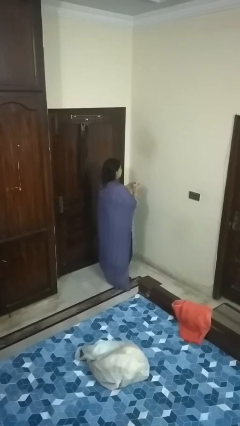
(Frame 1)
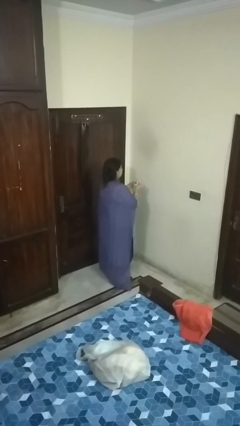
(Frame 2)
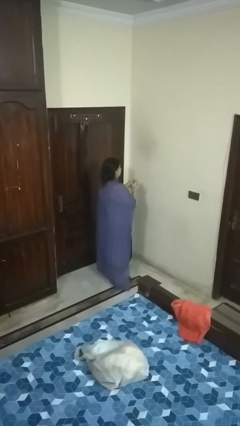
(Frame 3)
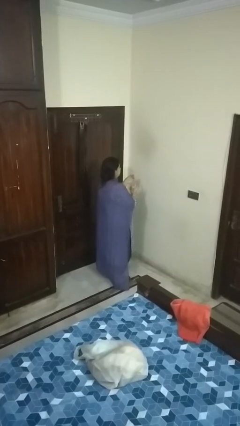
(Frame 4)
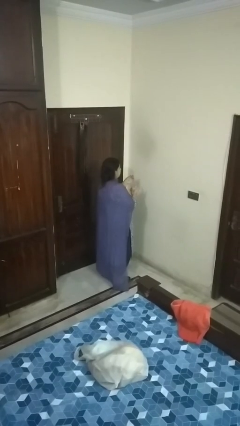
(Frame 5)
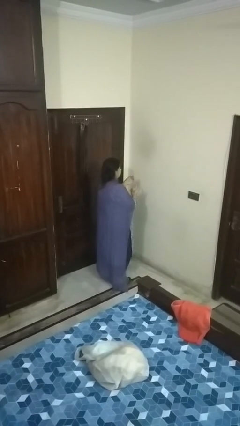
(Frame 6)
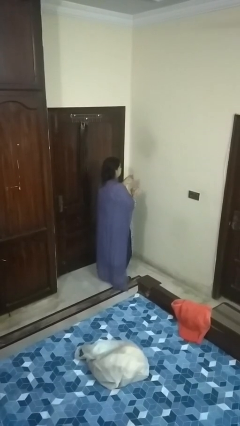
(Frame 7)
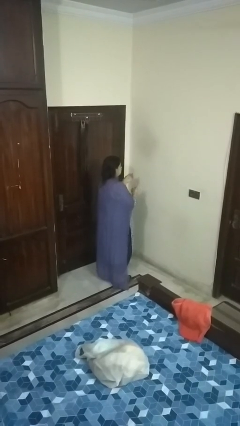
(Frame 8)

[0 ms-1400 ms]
person takes off ring

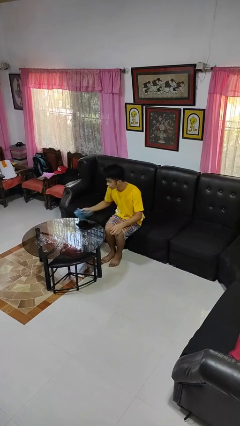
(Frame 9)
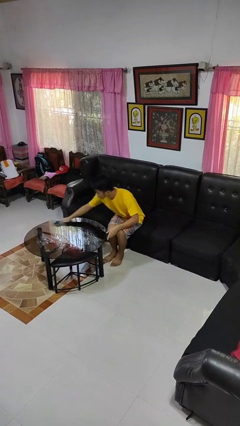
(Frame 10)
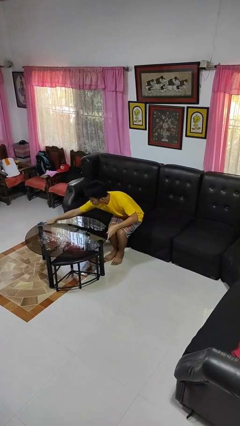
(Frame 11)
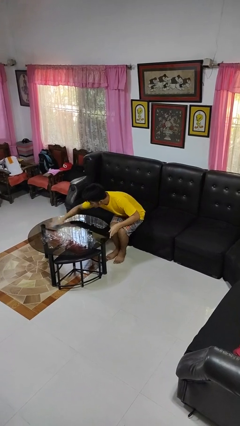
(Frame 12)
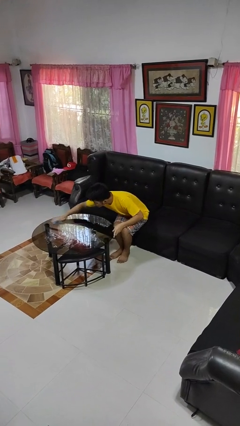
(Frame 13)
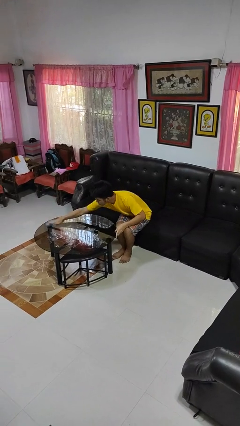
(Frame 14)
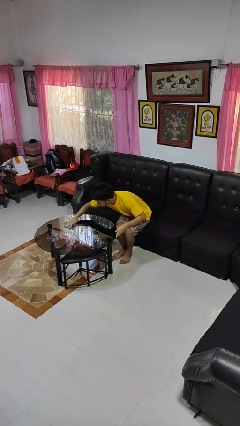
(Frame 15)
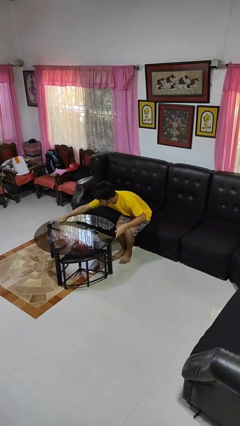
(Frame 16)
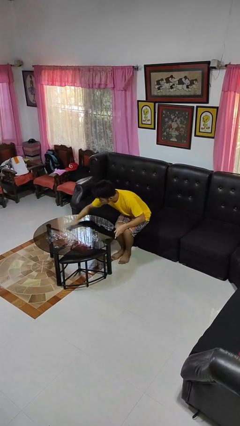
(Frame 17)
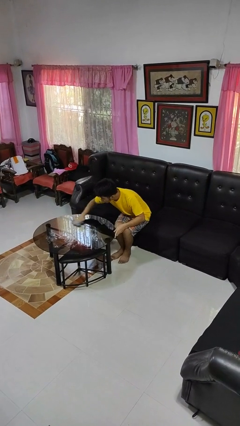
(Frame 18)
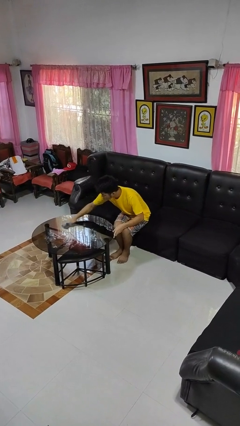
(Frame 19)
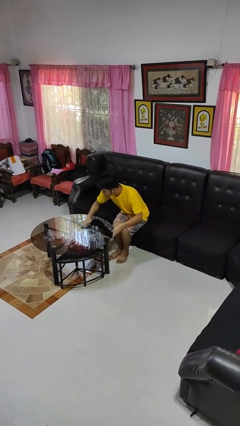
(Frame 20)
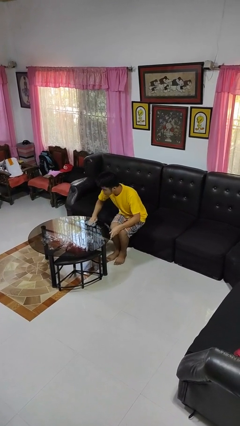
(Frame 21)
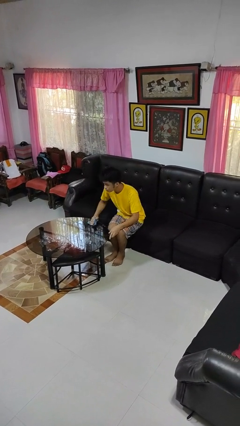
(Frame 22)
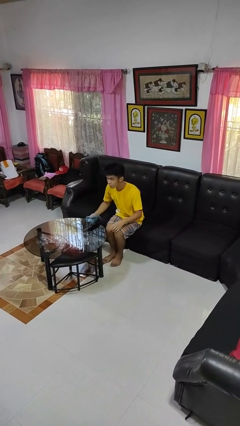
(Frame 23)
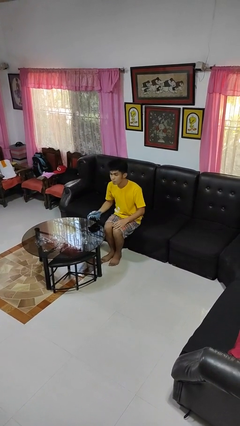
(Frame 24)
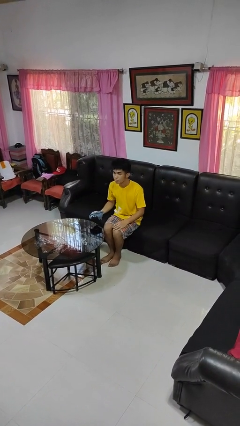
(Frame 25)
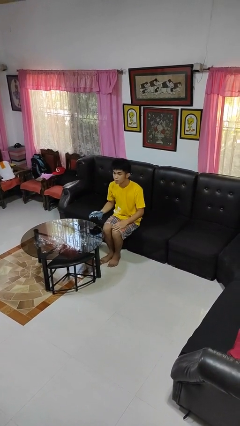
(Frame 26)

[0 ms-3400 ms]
person cleans table with rag

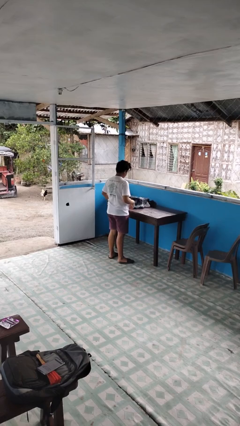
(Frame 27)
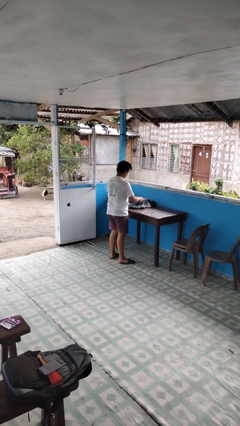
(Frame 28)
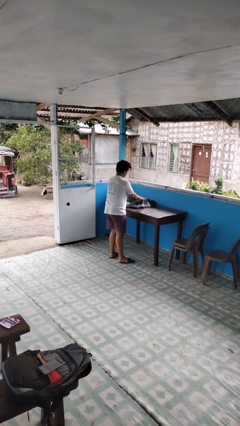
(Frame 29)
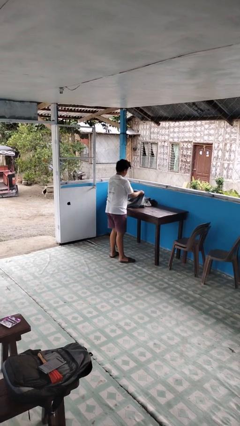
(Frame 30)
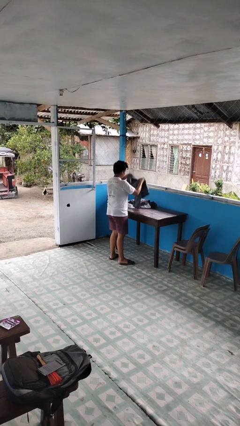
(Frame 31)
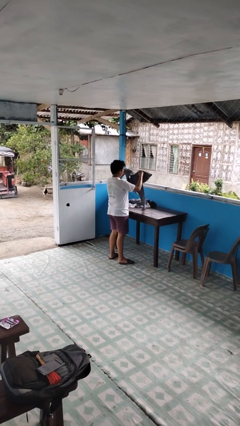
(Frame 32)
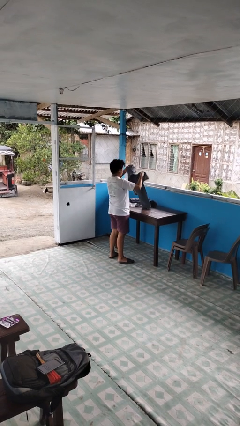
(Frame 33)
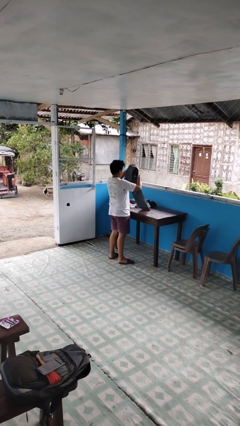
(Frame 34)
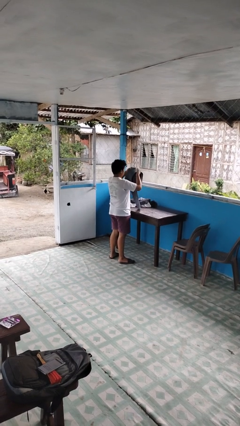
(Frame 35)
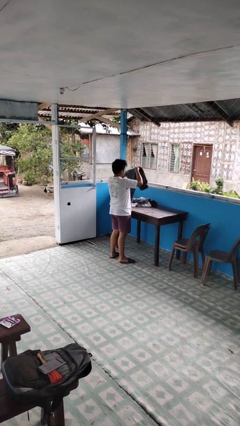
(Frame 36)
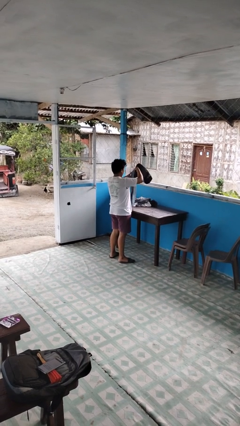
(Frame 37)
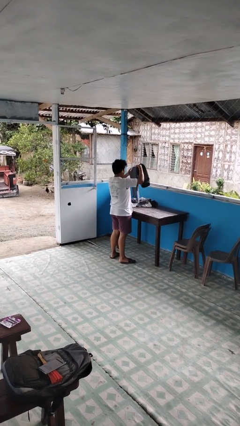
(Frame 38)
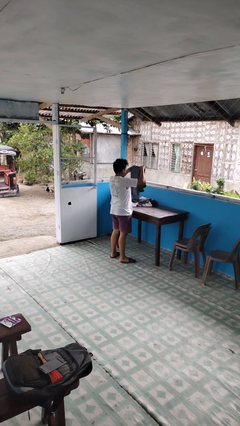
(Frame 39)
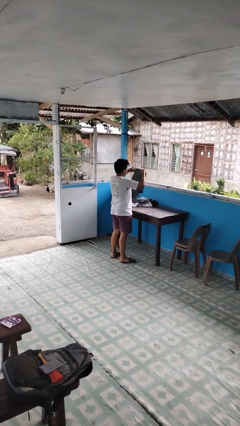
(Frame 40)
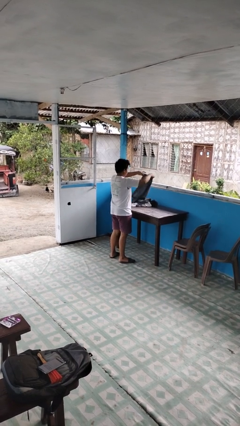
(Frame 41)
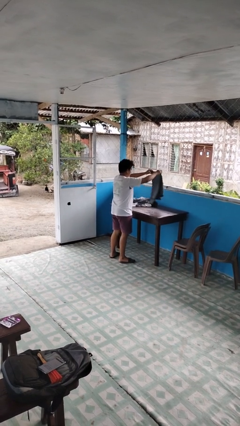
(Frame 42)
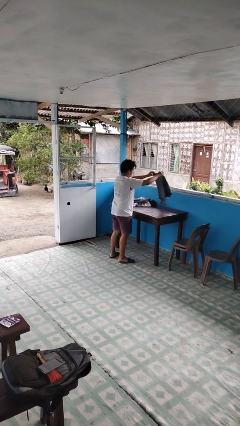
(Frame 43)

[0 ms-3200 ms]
person folds pants

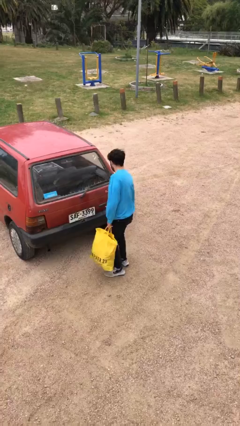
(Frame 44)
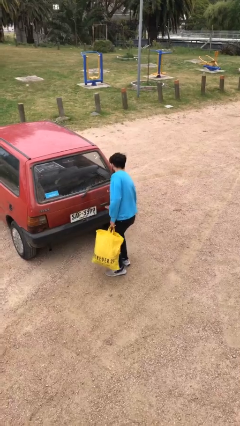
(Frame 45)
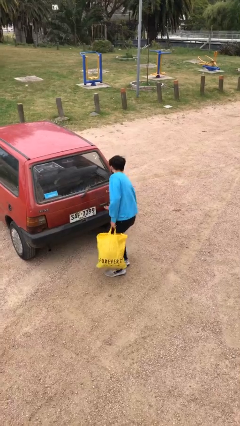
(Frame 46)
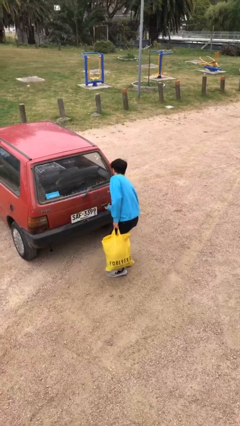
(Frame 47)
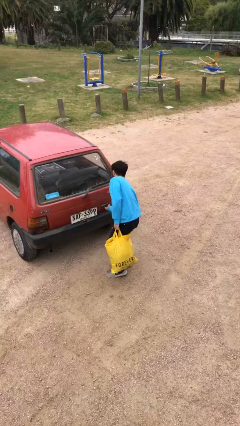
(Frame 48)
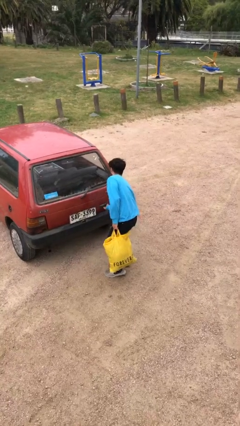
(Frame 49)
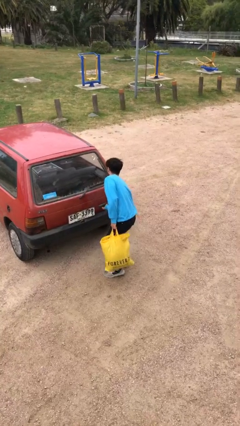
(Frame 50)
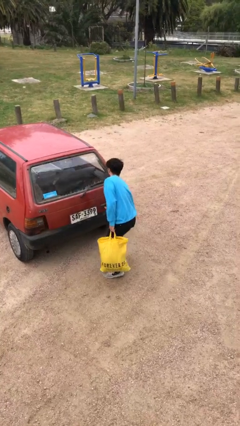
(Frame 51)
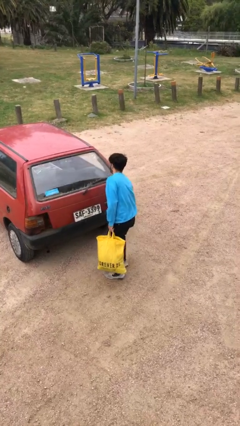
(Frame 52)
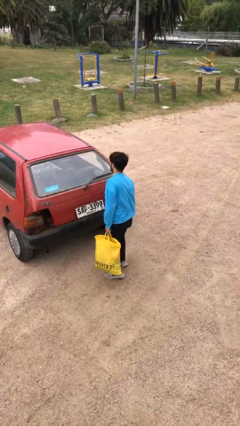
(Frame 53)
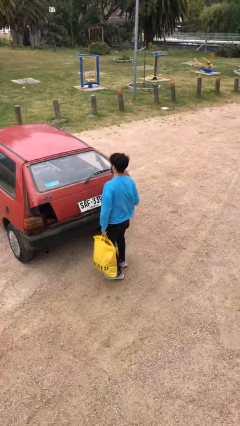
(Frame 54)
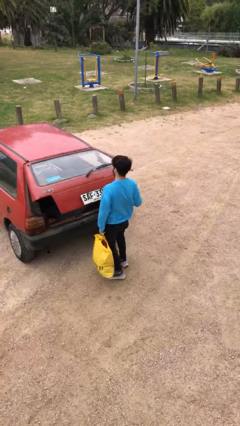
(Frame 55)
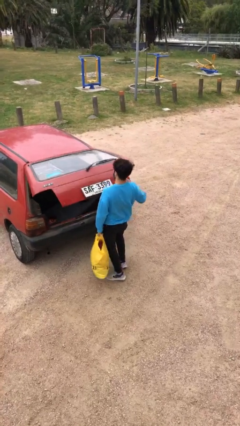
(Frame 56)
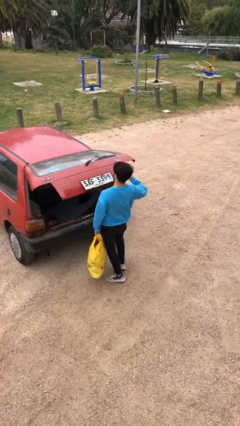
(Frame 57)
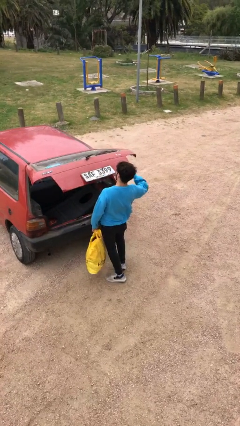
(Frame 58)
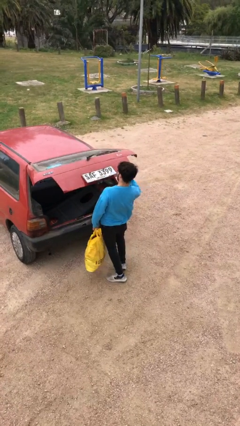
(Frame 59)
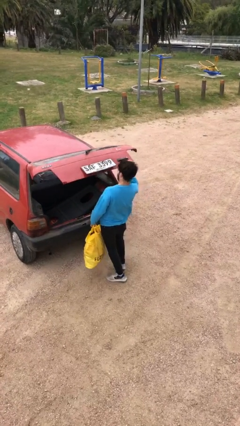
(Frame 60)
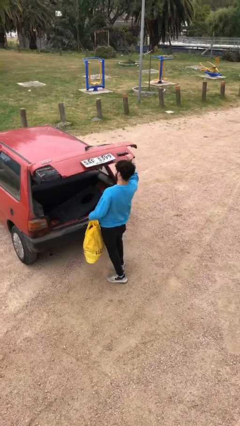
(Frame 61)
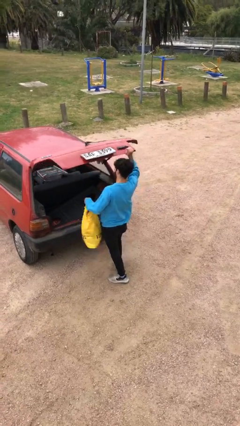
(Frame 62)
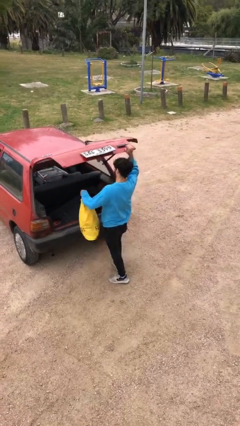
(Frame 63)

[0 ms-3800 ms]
person opens car trunk

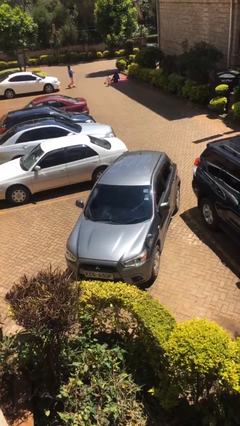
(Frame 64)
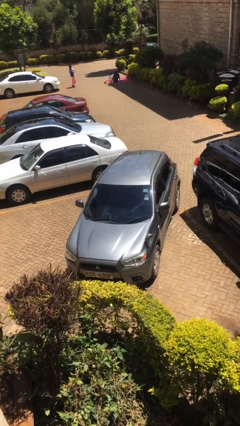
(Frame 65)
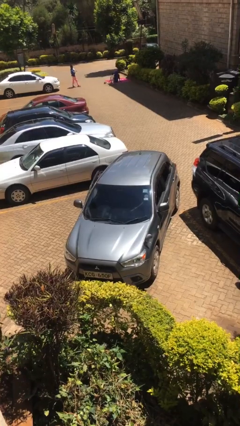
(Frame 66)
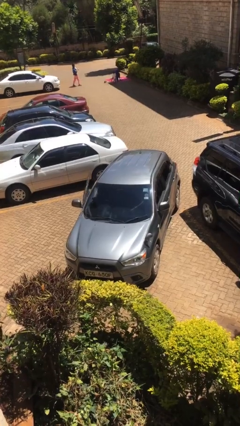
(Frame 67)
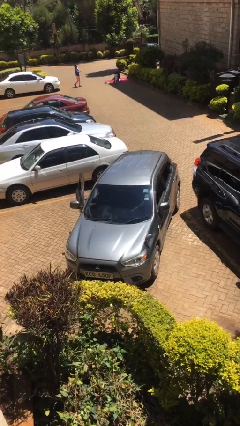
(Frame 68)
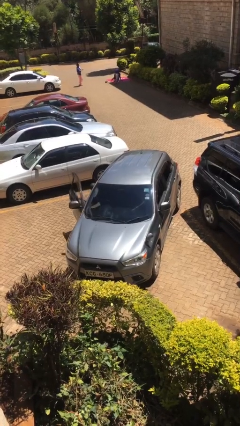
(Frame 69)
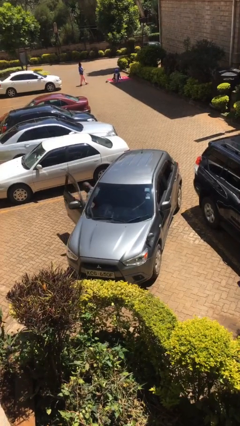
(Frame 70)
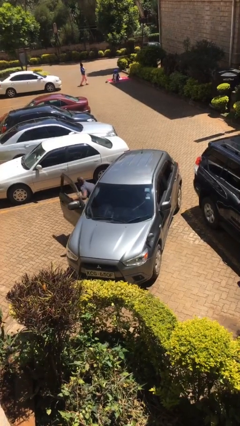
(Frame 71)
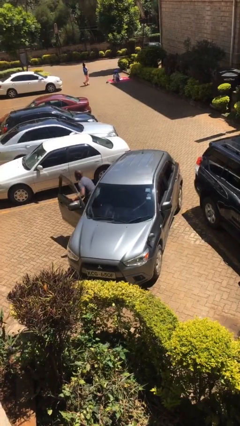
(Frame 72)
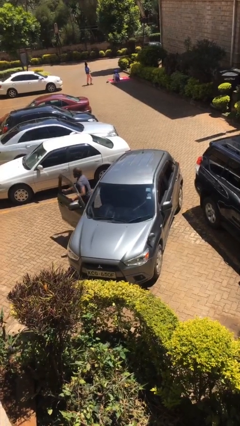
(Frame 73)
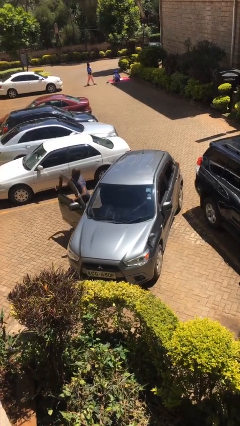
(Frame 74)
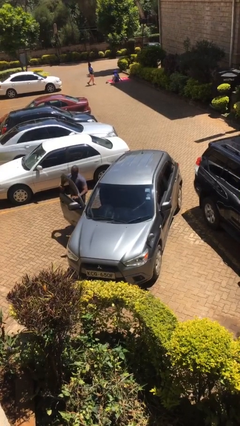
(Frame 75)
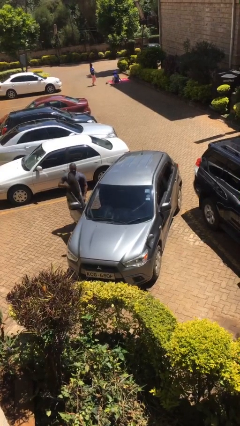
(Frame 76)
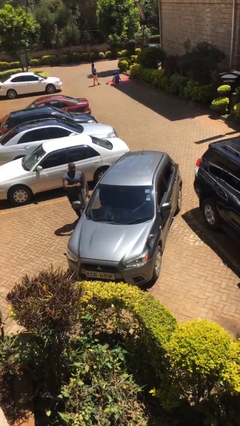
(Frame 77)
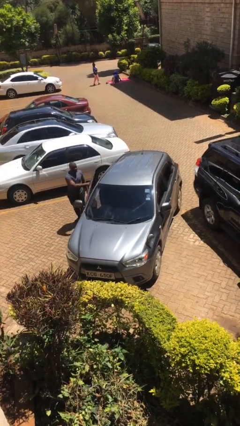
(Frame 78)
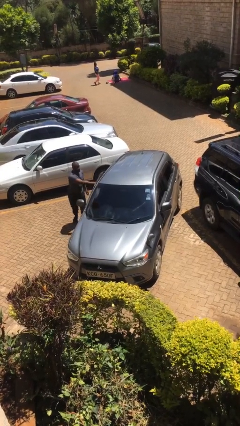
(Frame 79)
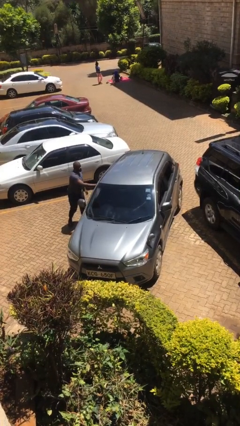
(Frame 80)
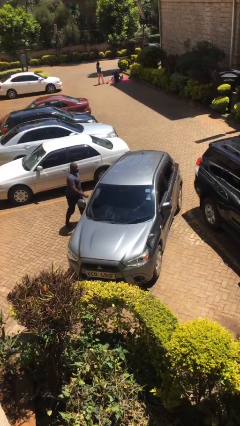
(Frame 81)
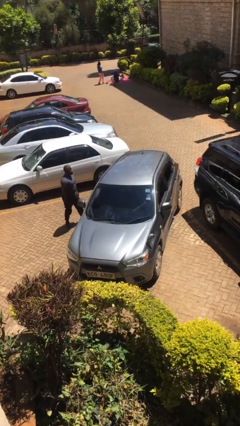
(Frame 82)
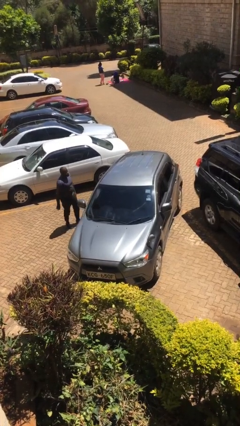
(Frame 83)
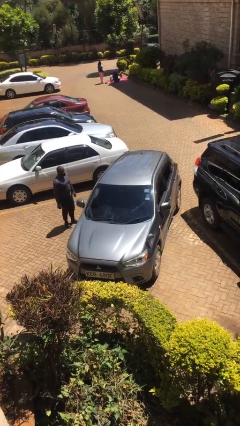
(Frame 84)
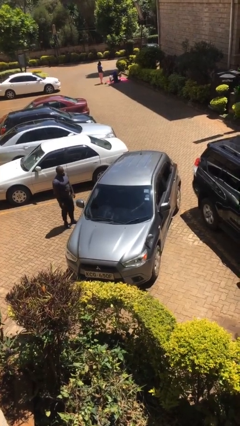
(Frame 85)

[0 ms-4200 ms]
car drops off person

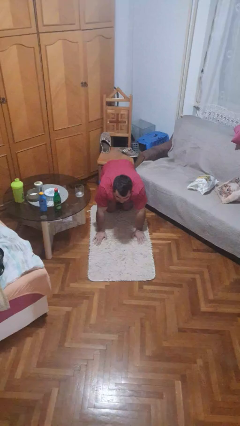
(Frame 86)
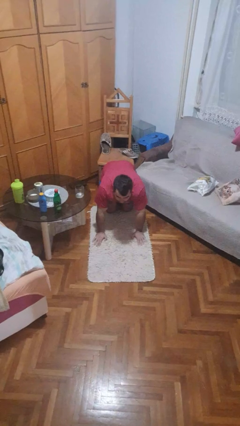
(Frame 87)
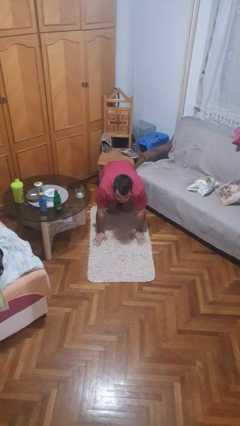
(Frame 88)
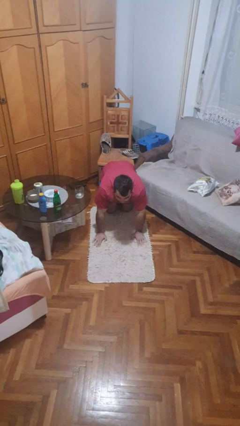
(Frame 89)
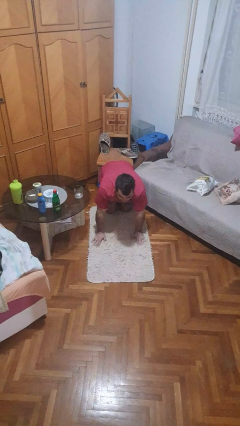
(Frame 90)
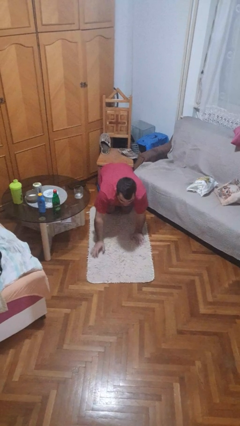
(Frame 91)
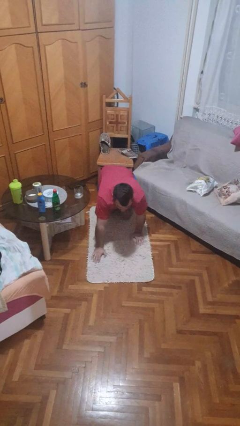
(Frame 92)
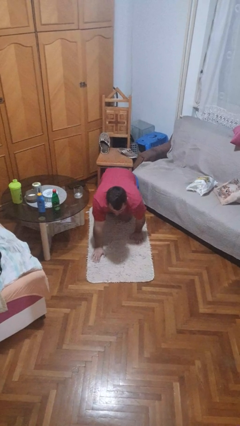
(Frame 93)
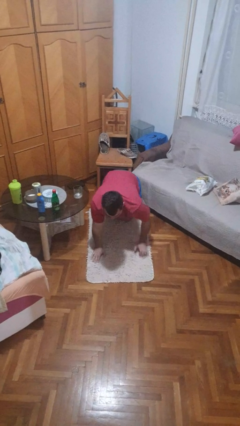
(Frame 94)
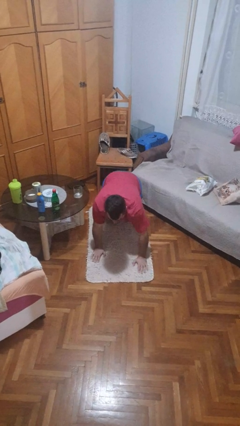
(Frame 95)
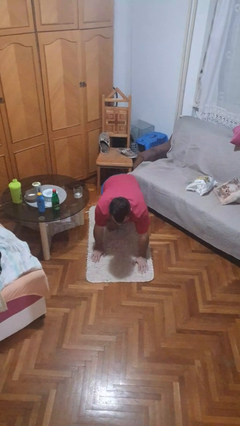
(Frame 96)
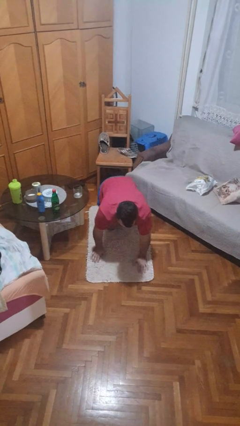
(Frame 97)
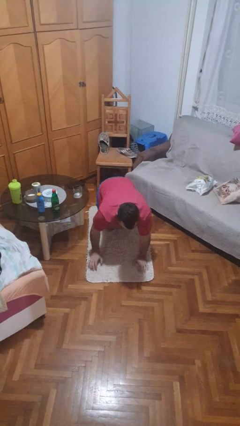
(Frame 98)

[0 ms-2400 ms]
person crawls
